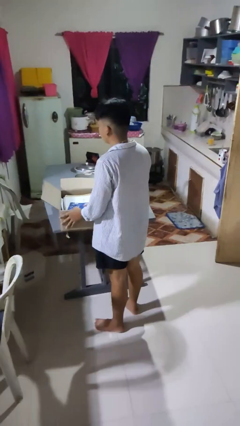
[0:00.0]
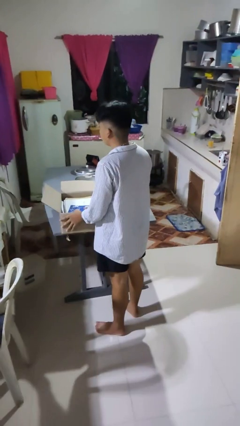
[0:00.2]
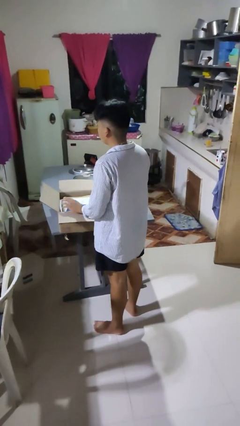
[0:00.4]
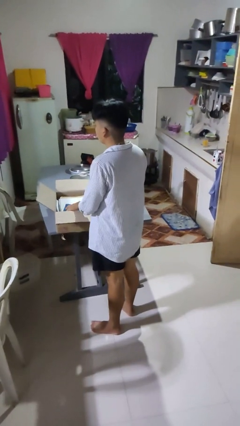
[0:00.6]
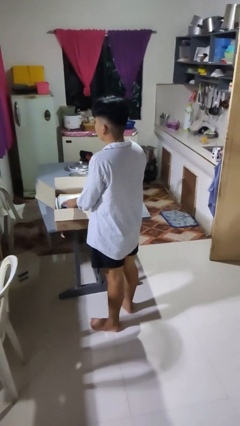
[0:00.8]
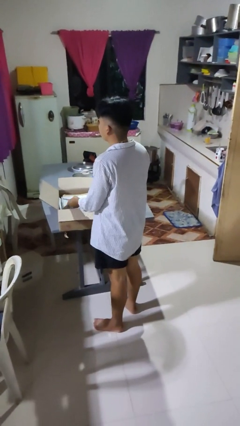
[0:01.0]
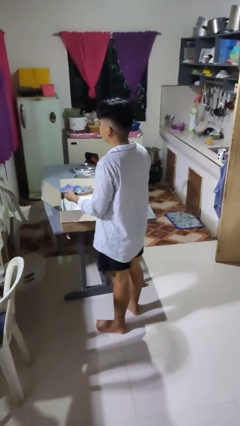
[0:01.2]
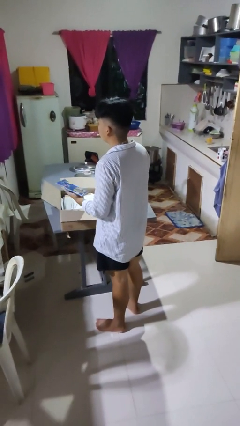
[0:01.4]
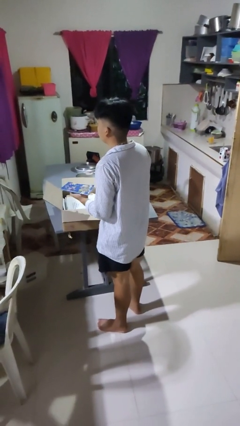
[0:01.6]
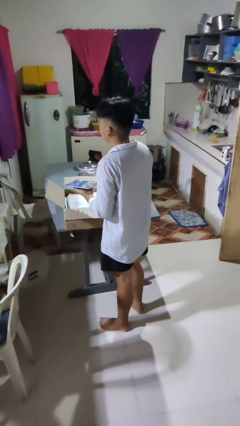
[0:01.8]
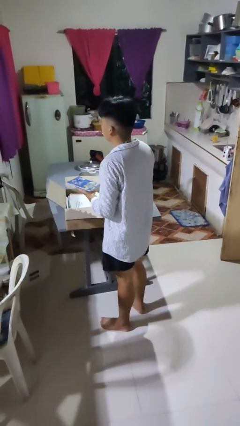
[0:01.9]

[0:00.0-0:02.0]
person takes object from box

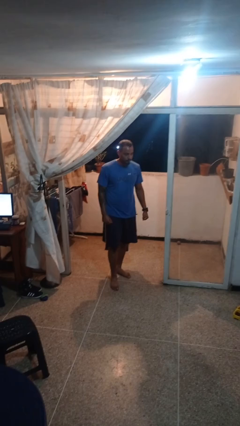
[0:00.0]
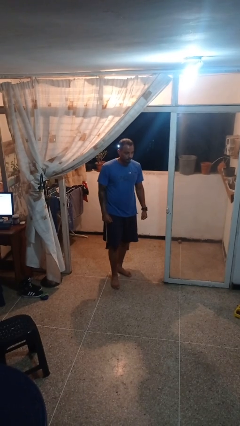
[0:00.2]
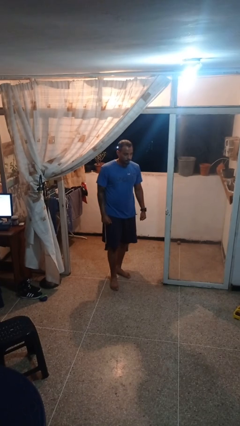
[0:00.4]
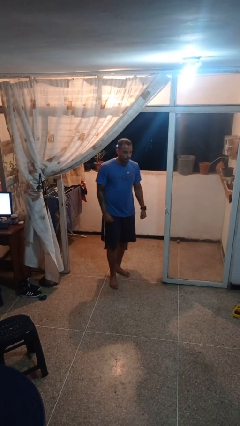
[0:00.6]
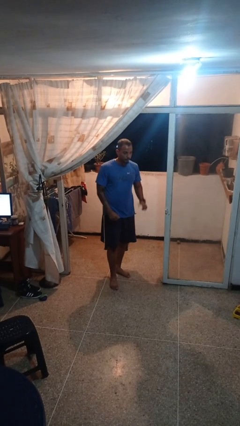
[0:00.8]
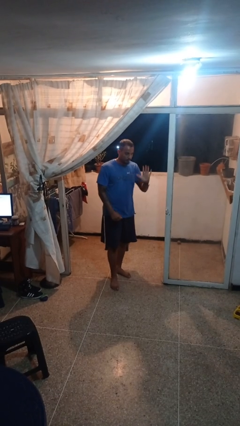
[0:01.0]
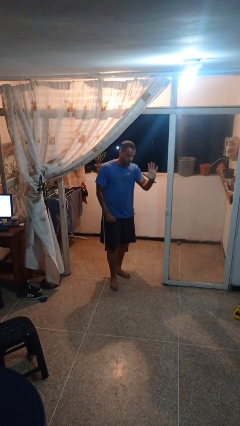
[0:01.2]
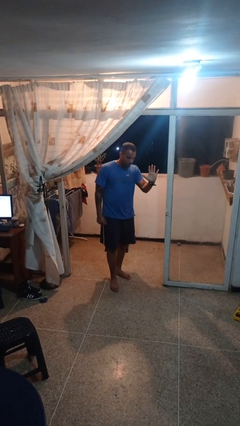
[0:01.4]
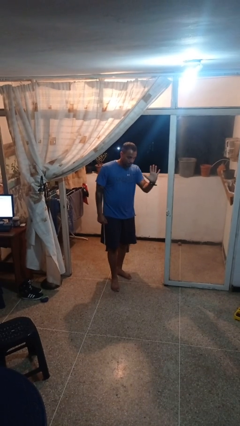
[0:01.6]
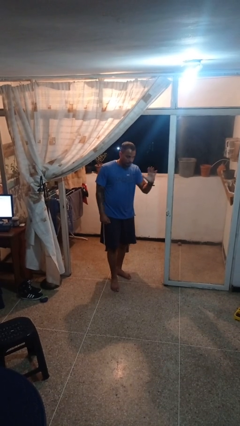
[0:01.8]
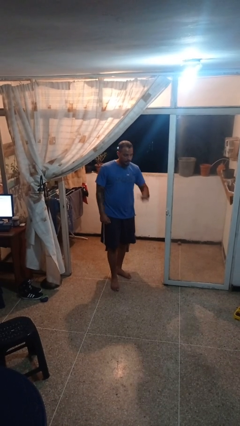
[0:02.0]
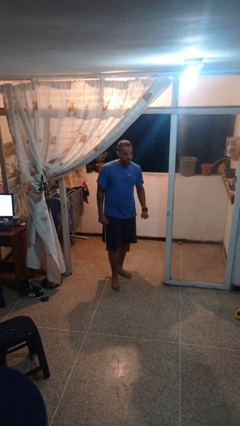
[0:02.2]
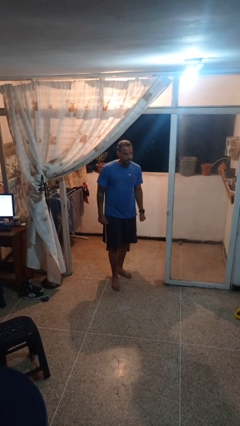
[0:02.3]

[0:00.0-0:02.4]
person gestures number five

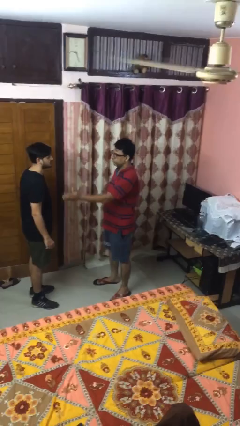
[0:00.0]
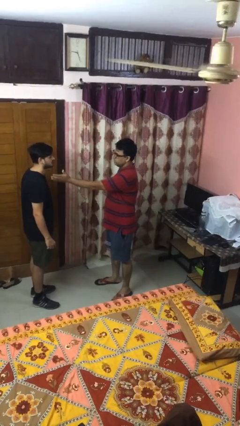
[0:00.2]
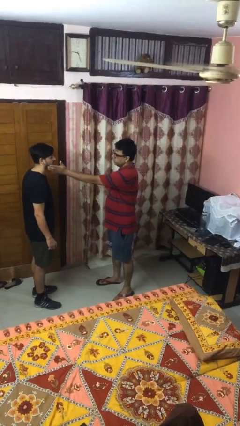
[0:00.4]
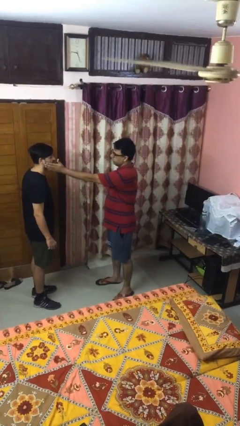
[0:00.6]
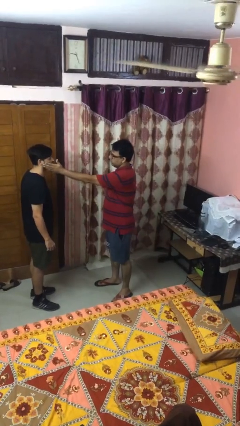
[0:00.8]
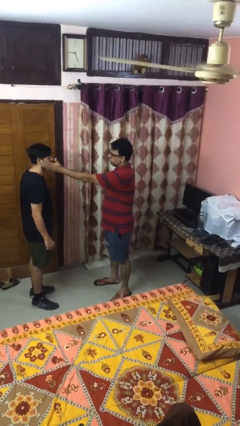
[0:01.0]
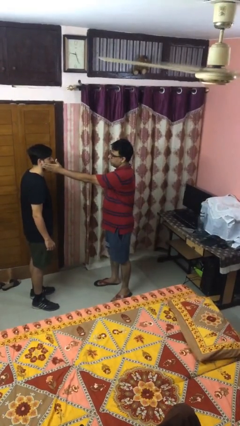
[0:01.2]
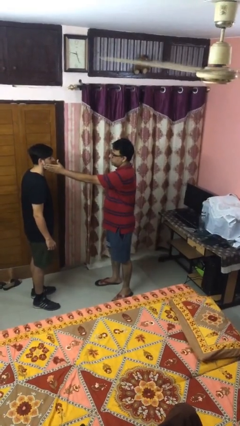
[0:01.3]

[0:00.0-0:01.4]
person touches face of person

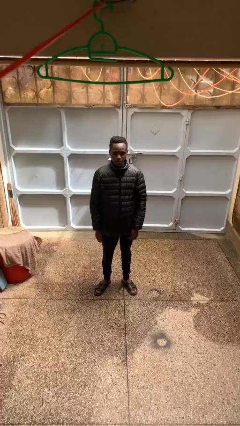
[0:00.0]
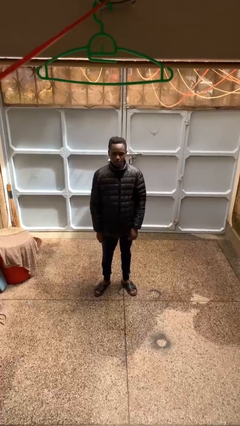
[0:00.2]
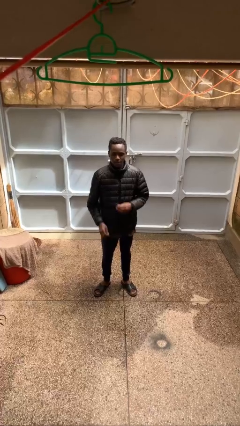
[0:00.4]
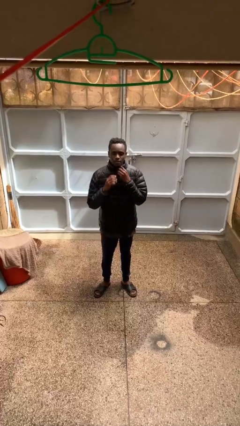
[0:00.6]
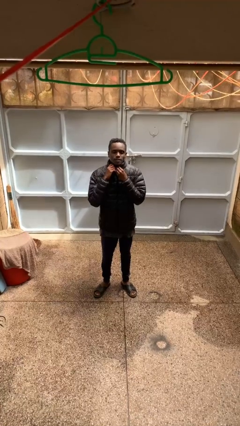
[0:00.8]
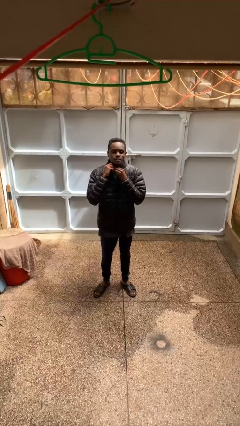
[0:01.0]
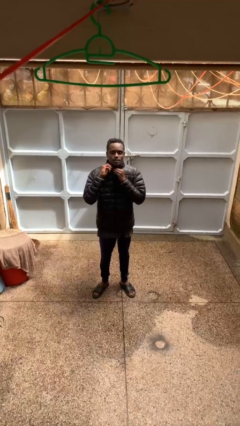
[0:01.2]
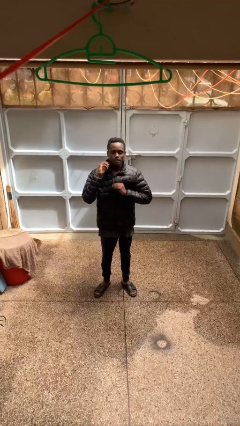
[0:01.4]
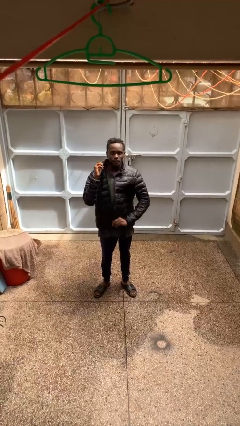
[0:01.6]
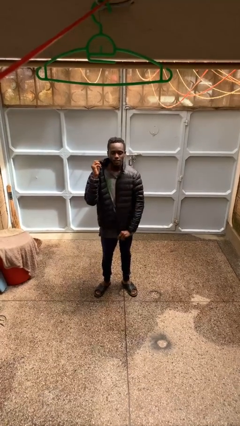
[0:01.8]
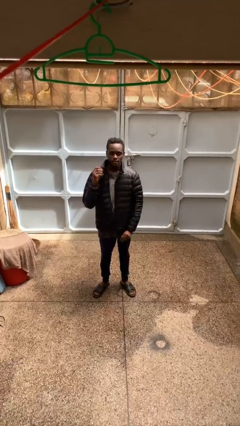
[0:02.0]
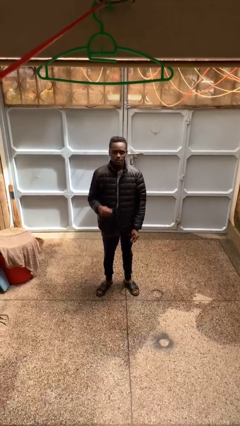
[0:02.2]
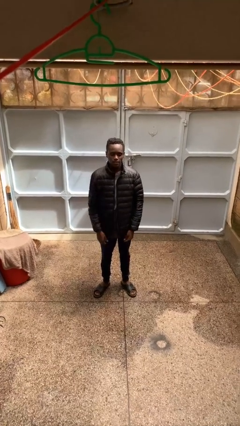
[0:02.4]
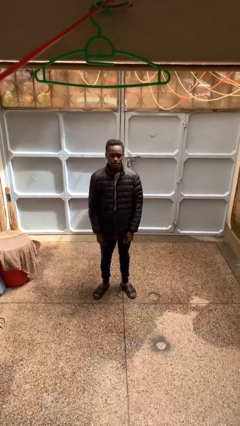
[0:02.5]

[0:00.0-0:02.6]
person unzips jacket

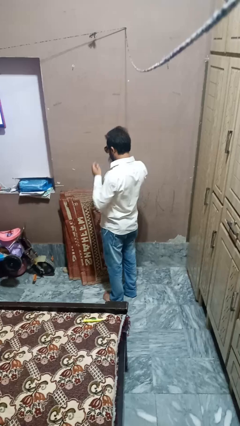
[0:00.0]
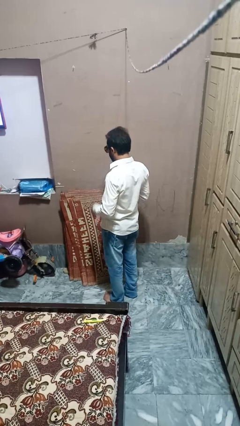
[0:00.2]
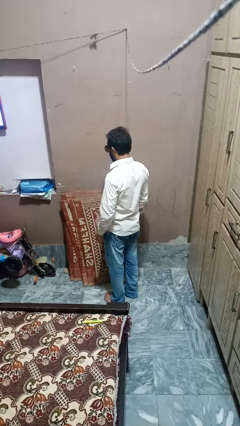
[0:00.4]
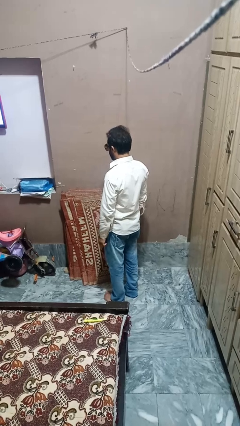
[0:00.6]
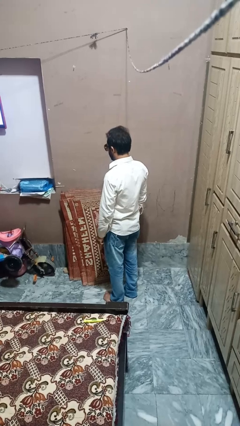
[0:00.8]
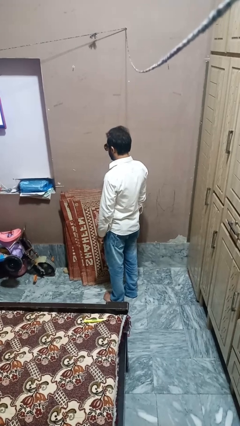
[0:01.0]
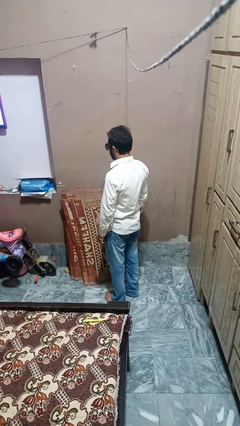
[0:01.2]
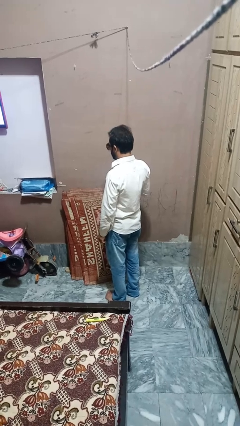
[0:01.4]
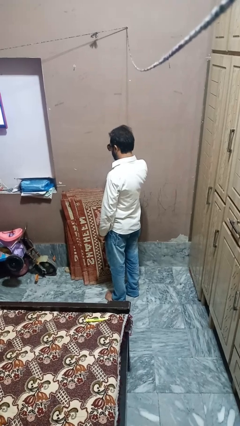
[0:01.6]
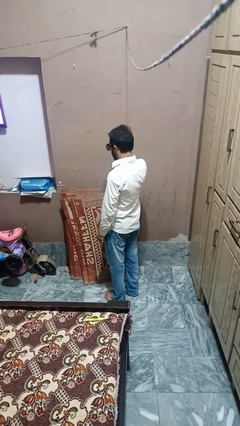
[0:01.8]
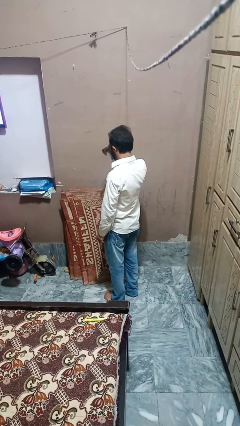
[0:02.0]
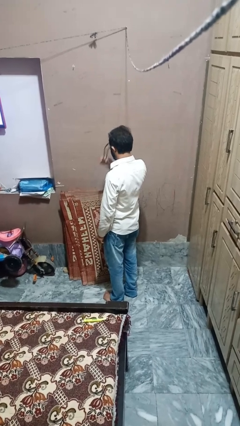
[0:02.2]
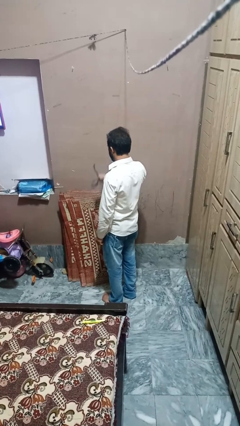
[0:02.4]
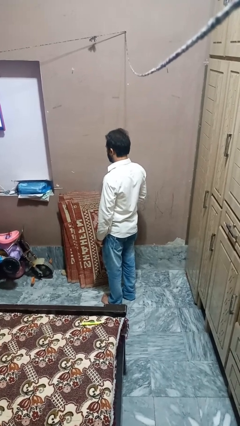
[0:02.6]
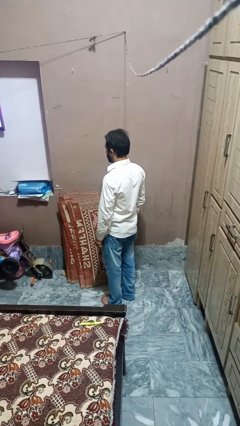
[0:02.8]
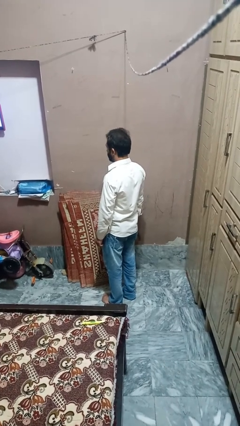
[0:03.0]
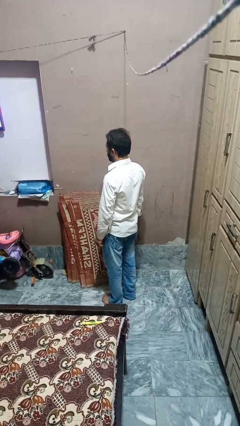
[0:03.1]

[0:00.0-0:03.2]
person takes off sunglasses

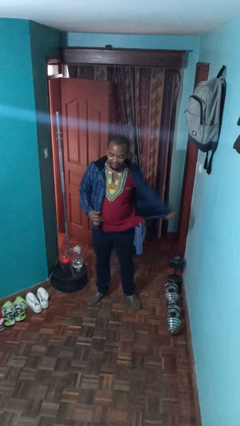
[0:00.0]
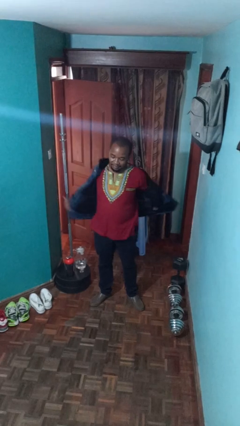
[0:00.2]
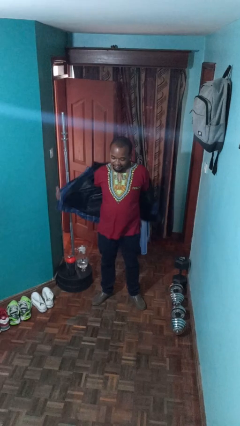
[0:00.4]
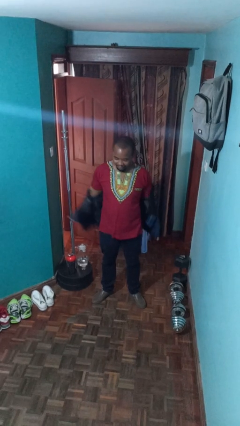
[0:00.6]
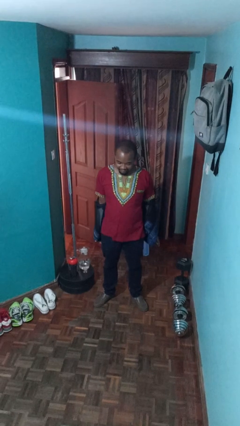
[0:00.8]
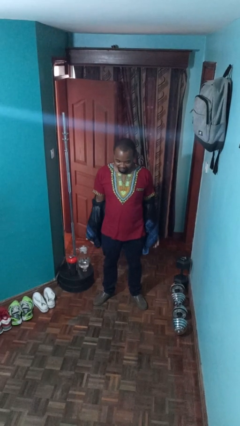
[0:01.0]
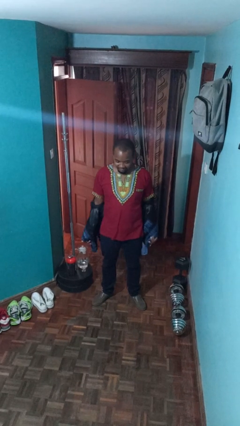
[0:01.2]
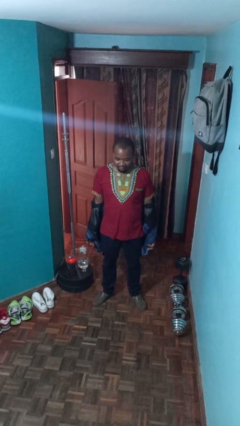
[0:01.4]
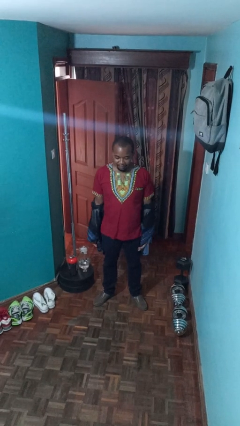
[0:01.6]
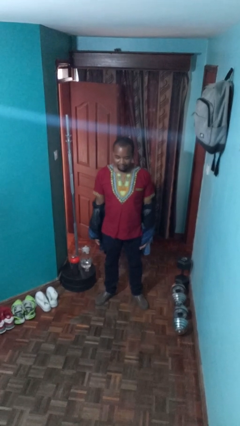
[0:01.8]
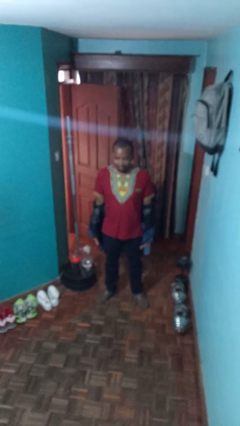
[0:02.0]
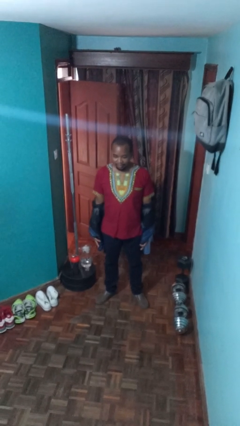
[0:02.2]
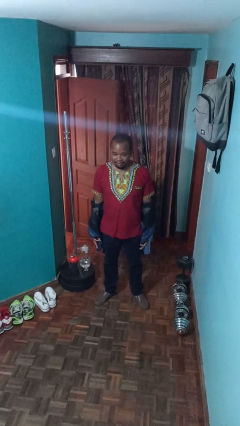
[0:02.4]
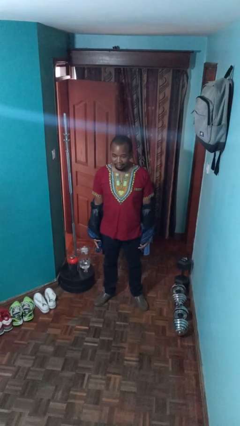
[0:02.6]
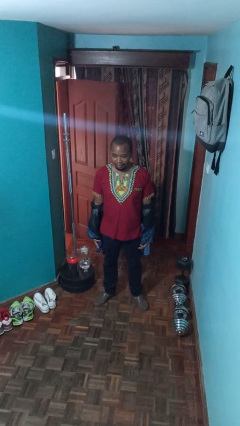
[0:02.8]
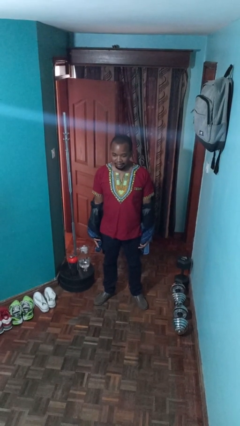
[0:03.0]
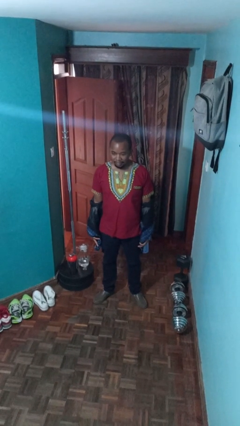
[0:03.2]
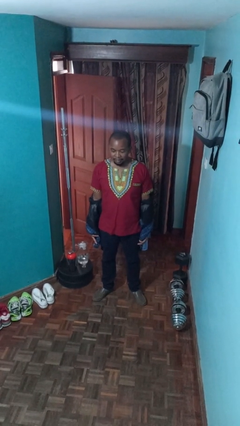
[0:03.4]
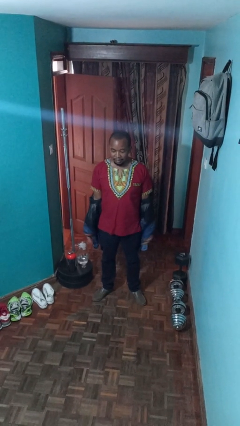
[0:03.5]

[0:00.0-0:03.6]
person takes off jacket

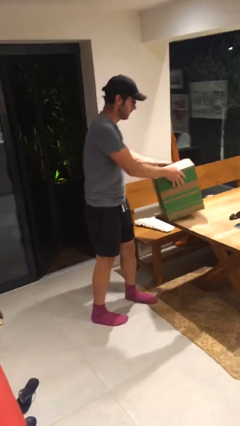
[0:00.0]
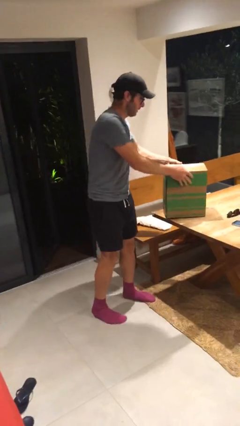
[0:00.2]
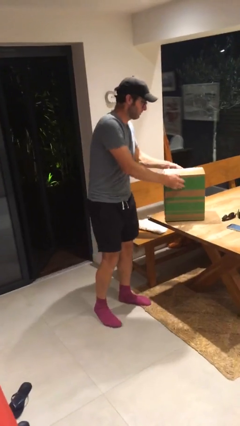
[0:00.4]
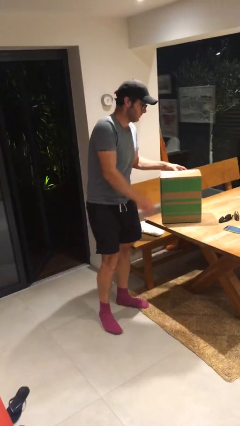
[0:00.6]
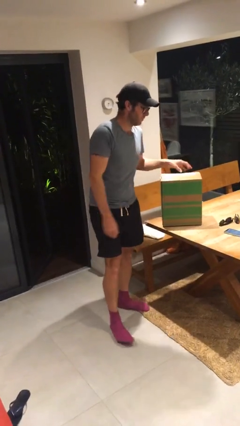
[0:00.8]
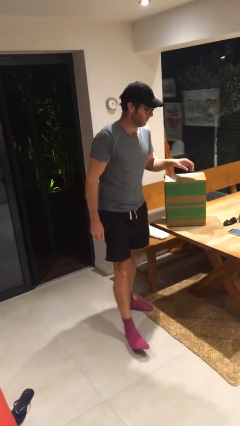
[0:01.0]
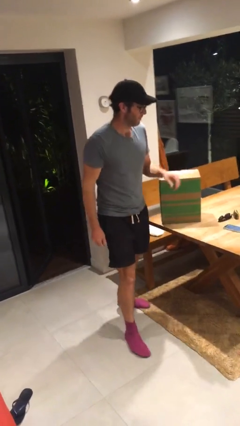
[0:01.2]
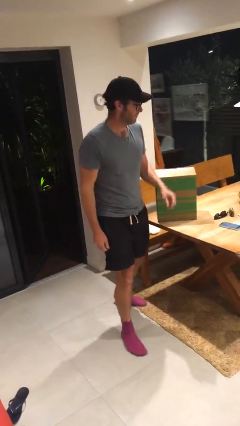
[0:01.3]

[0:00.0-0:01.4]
person puts down object on table

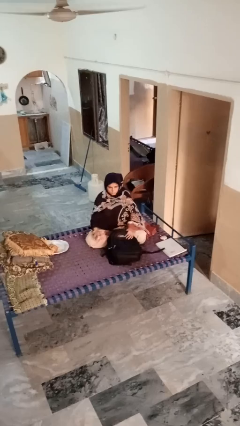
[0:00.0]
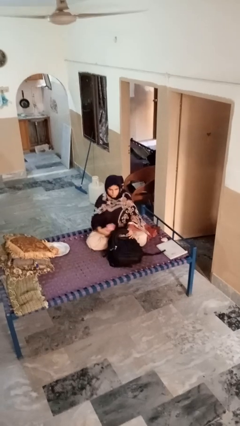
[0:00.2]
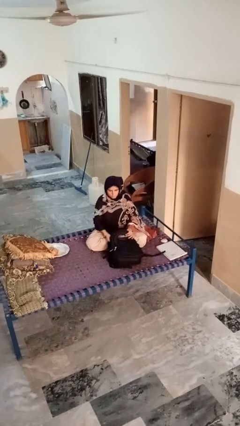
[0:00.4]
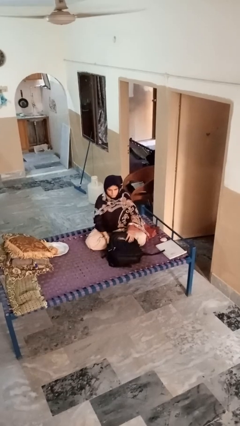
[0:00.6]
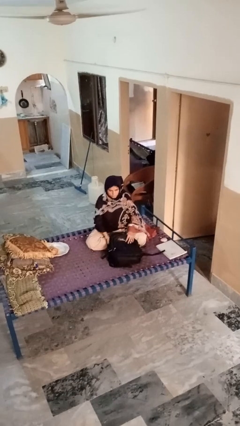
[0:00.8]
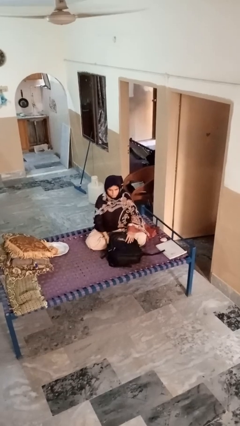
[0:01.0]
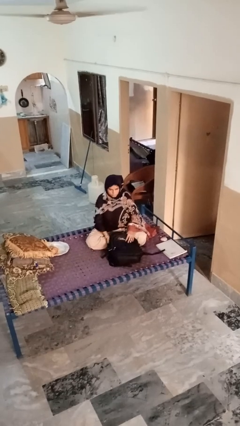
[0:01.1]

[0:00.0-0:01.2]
person puts object into bag
